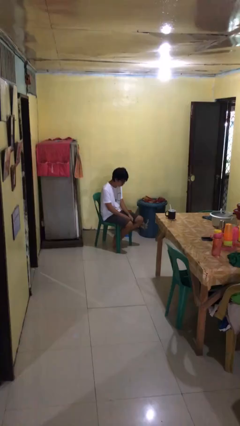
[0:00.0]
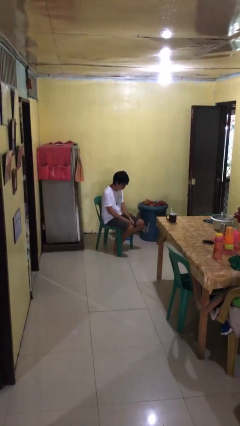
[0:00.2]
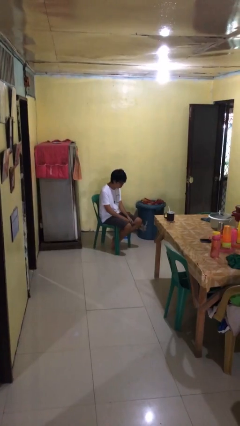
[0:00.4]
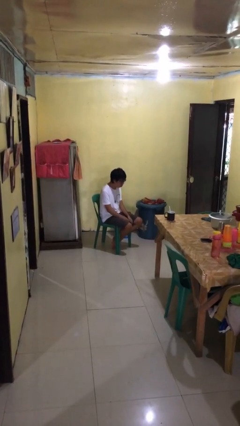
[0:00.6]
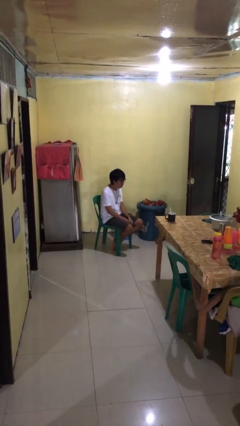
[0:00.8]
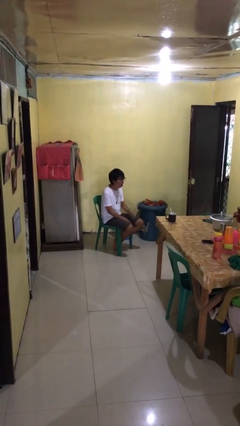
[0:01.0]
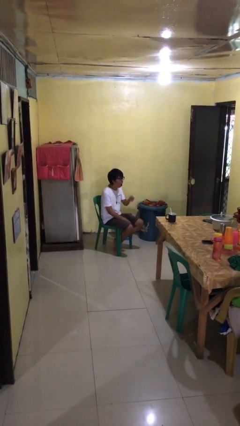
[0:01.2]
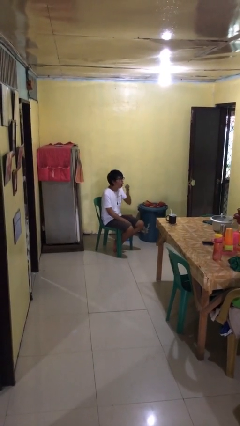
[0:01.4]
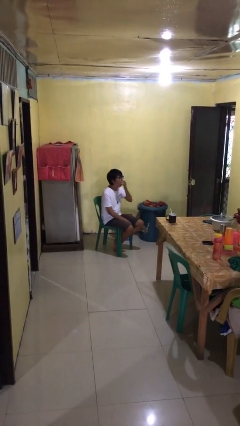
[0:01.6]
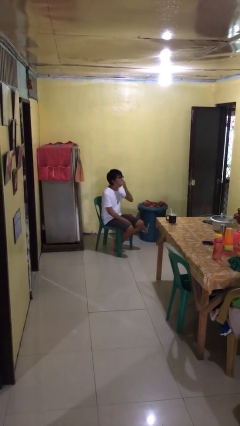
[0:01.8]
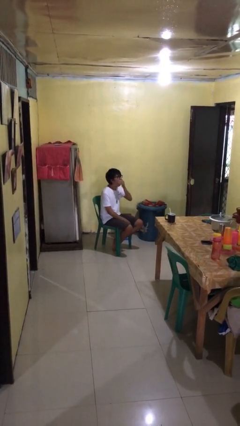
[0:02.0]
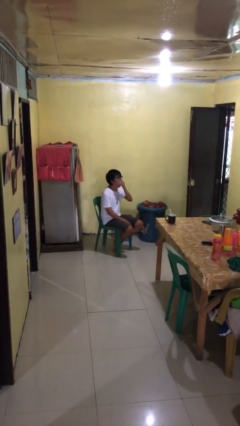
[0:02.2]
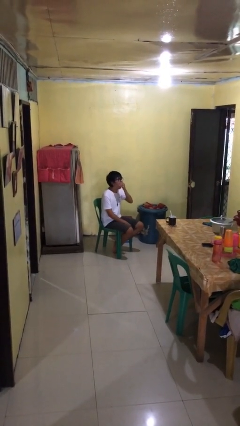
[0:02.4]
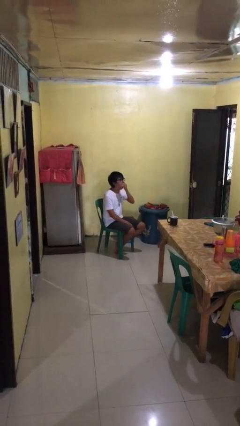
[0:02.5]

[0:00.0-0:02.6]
person yawns

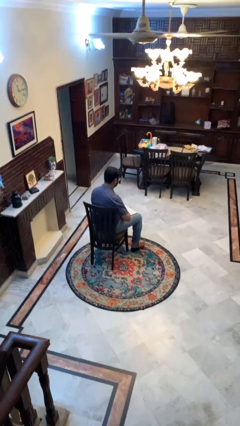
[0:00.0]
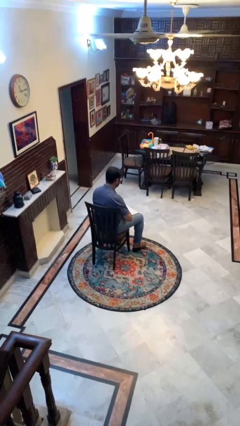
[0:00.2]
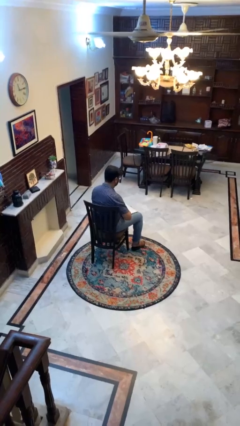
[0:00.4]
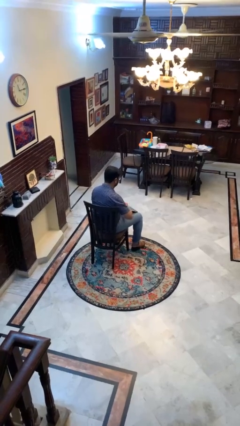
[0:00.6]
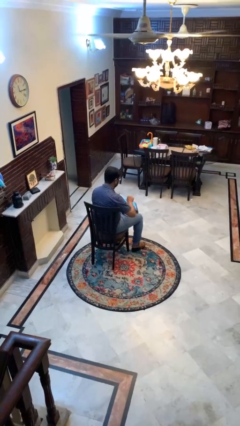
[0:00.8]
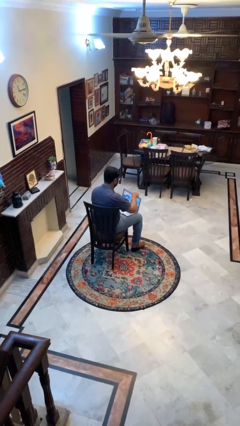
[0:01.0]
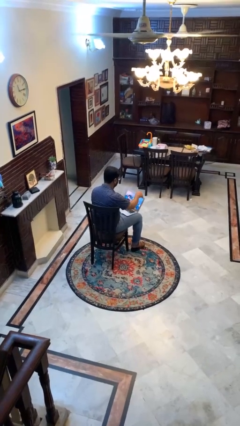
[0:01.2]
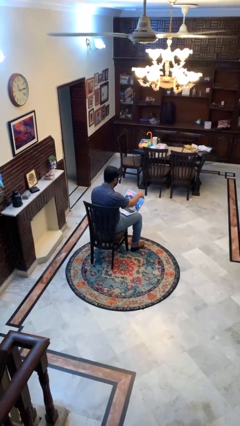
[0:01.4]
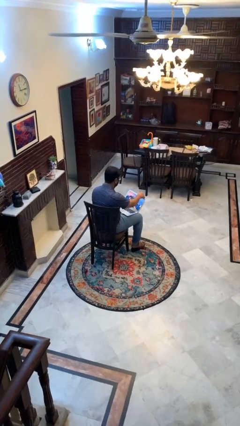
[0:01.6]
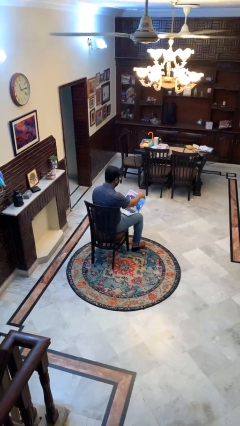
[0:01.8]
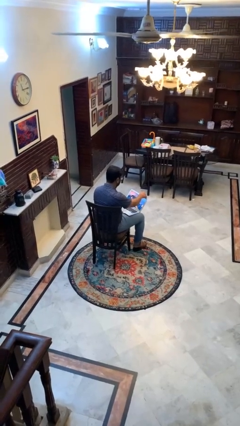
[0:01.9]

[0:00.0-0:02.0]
person opens laptop

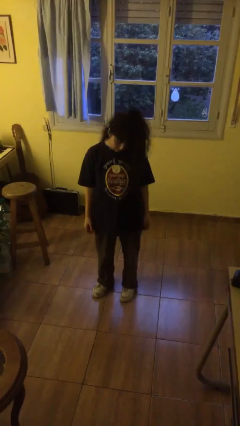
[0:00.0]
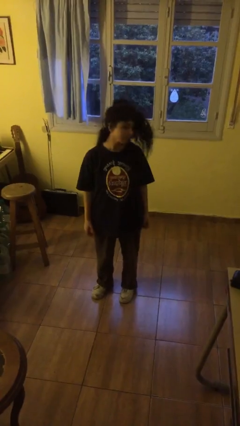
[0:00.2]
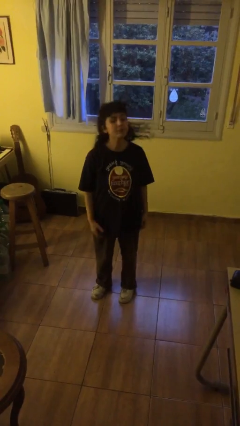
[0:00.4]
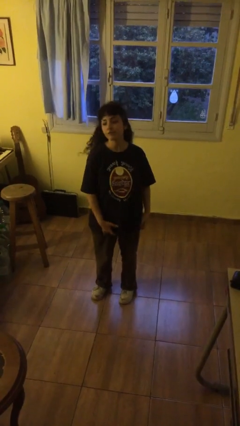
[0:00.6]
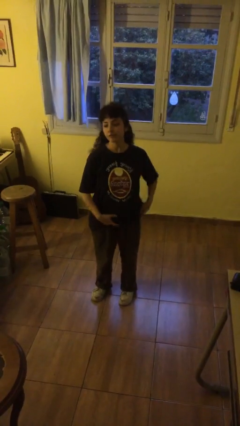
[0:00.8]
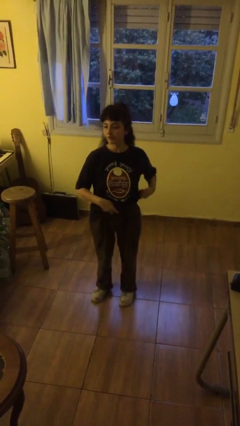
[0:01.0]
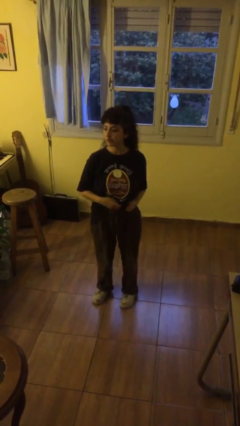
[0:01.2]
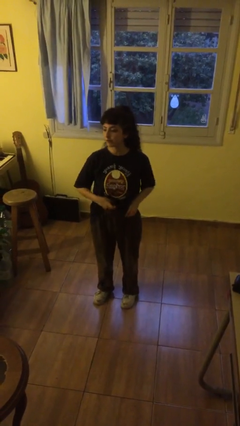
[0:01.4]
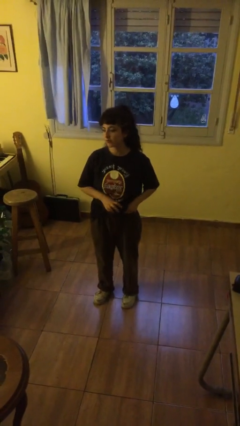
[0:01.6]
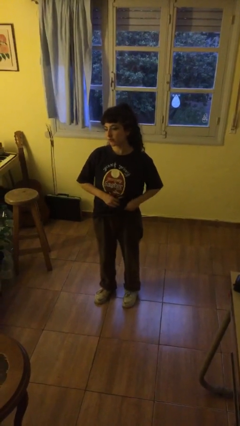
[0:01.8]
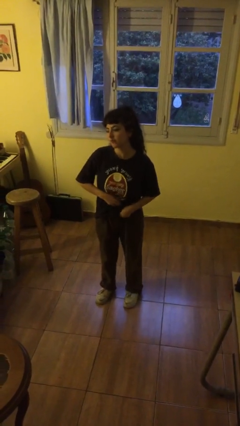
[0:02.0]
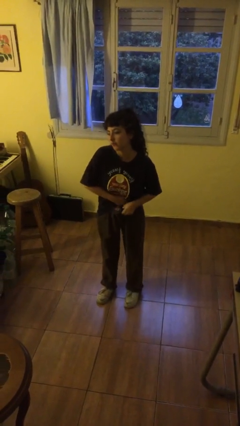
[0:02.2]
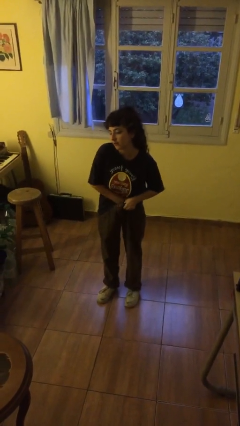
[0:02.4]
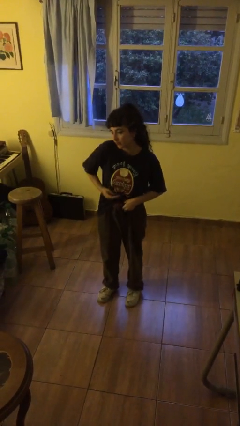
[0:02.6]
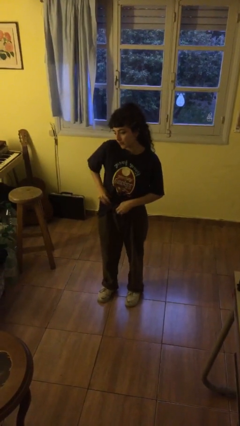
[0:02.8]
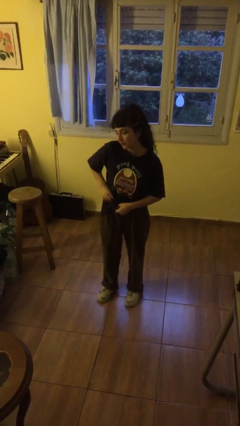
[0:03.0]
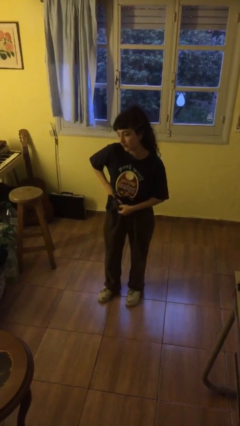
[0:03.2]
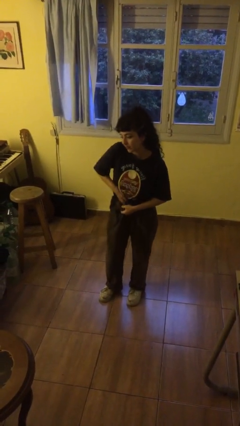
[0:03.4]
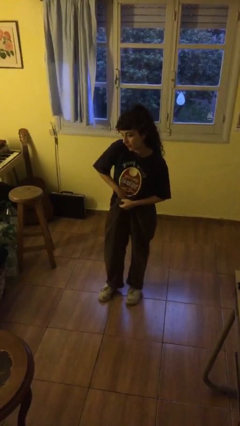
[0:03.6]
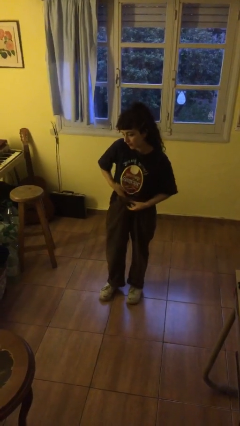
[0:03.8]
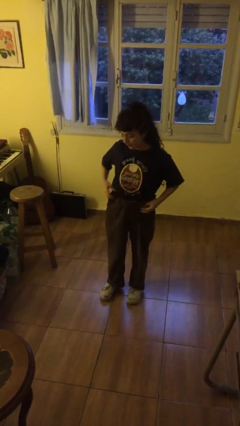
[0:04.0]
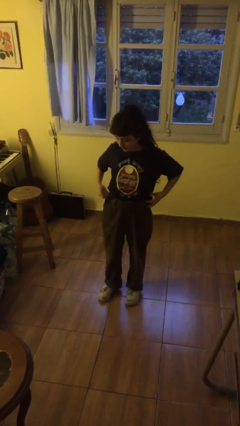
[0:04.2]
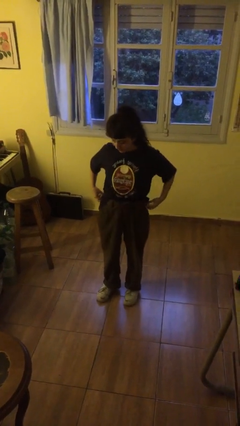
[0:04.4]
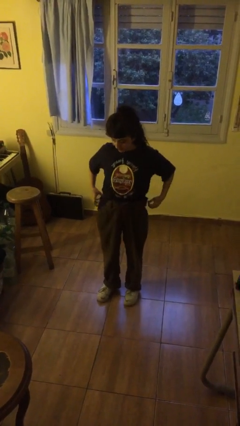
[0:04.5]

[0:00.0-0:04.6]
person tucks in shirt

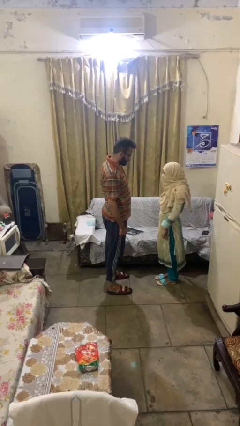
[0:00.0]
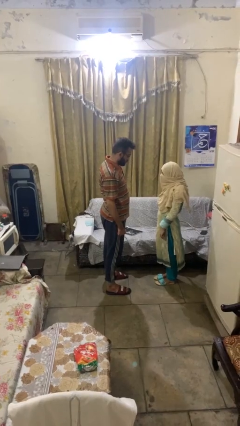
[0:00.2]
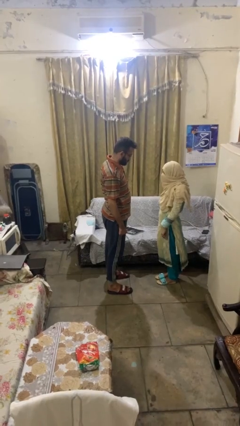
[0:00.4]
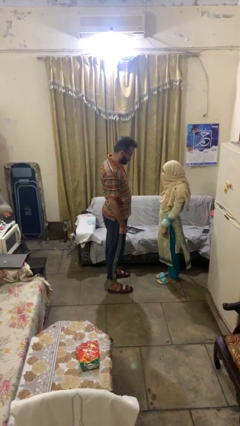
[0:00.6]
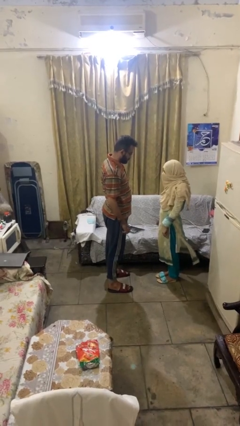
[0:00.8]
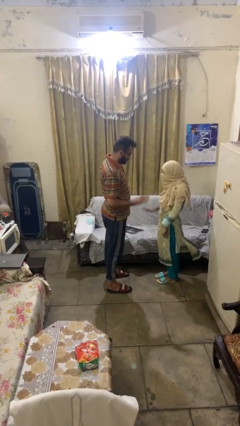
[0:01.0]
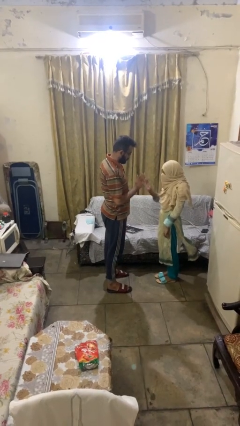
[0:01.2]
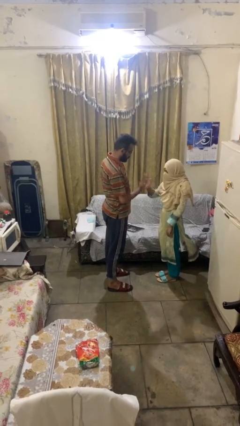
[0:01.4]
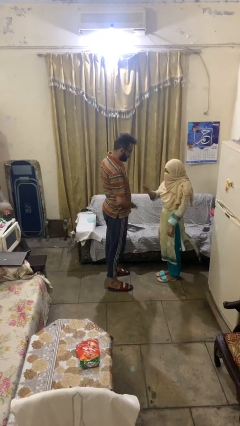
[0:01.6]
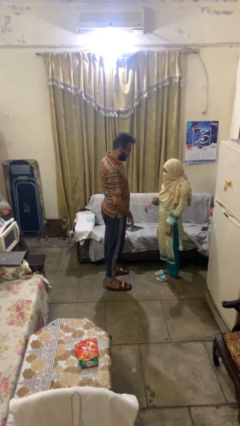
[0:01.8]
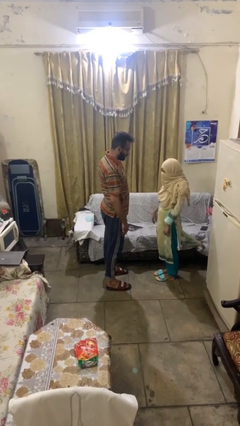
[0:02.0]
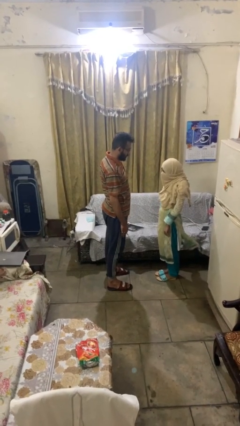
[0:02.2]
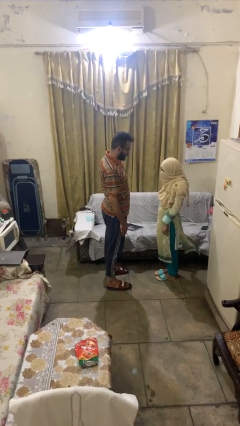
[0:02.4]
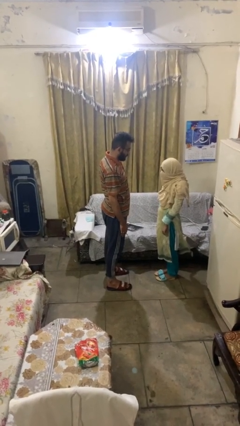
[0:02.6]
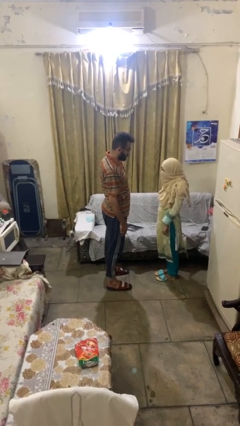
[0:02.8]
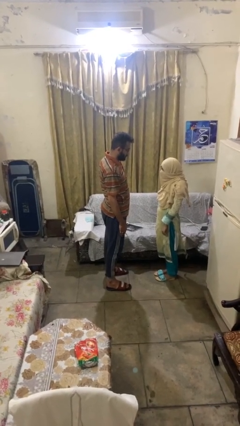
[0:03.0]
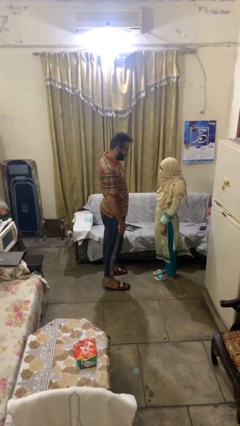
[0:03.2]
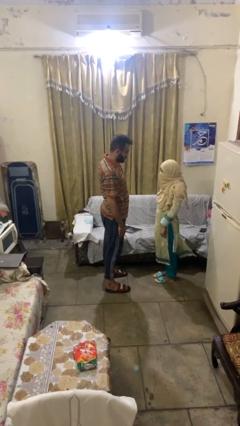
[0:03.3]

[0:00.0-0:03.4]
person highfives hand

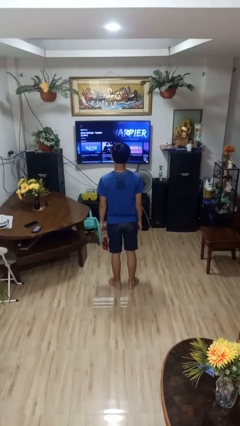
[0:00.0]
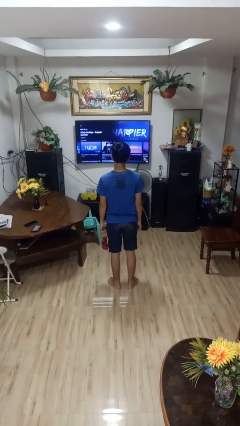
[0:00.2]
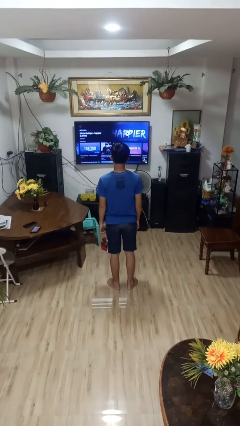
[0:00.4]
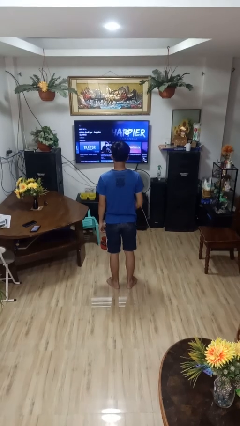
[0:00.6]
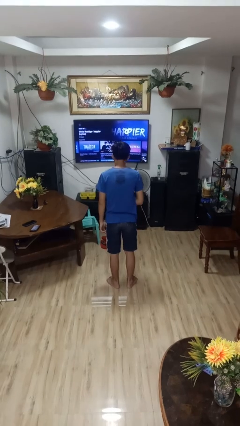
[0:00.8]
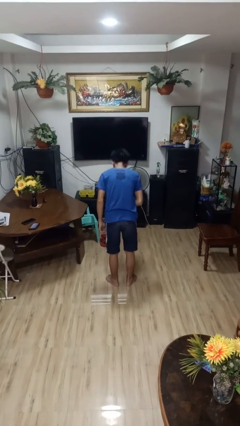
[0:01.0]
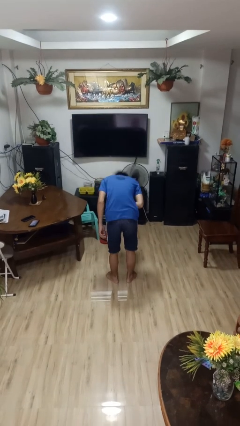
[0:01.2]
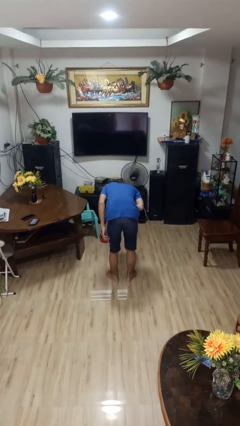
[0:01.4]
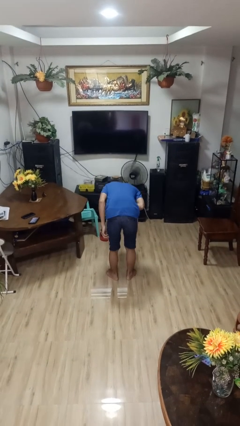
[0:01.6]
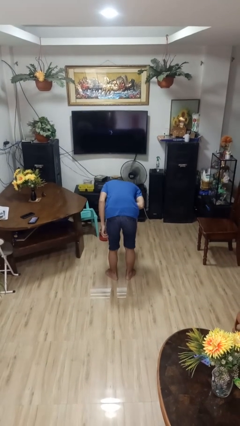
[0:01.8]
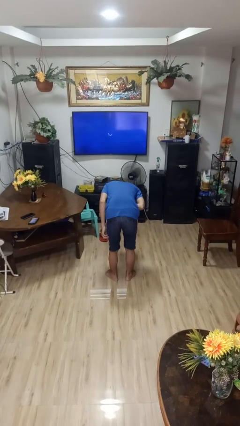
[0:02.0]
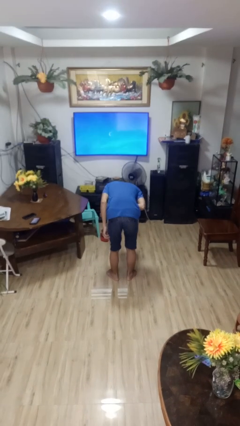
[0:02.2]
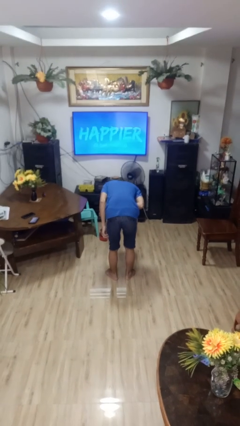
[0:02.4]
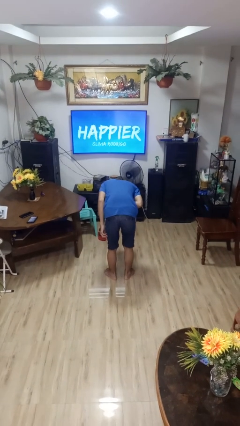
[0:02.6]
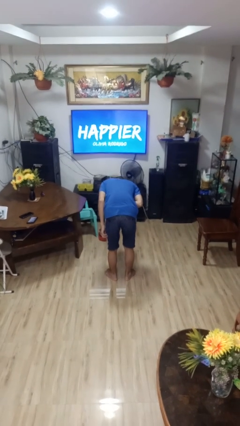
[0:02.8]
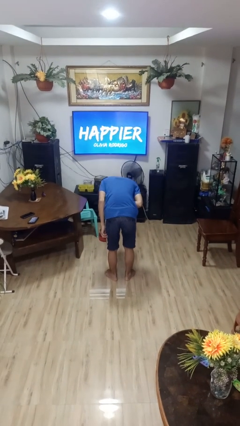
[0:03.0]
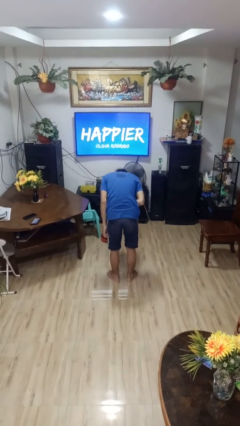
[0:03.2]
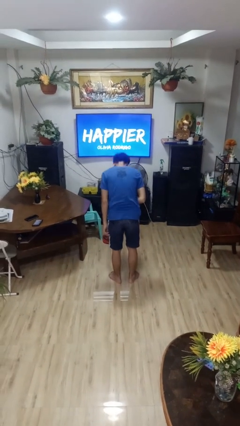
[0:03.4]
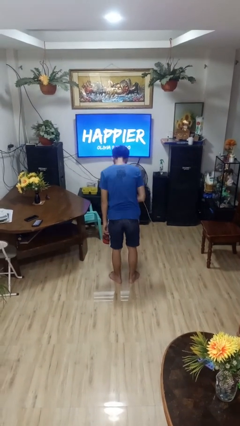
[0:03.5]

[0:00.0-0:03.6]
person bows

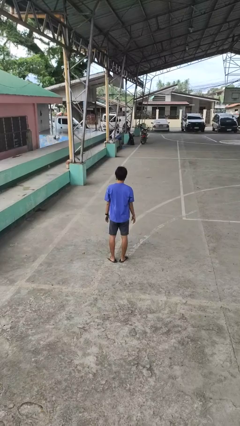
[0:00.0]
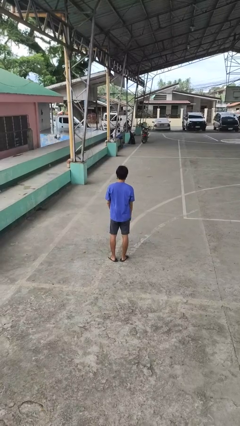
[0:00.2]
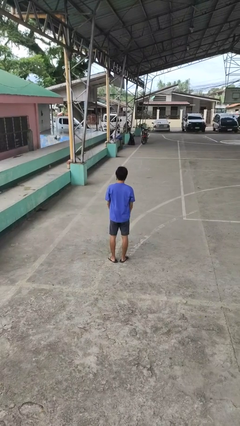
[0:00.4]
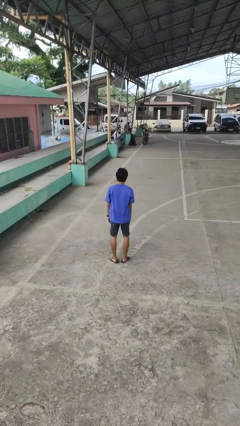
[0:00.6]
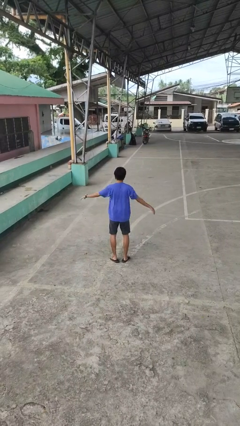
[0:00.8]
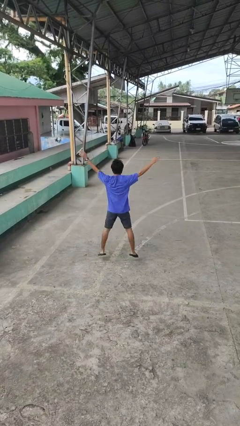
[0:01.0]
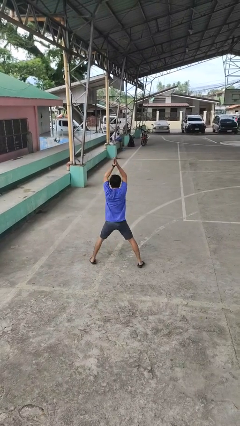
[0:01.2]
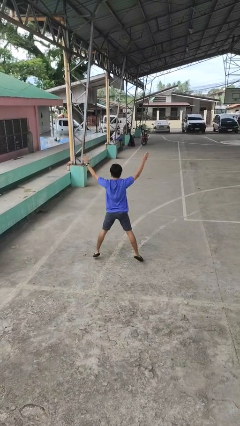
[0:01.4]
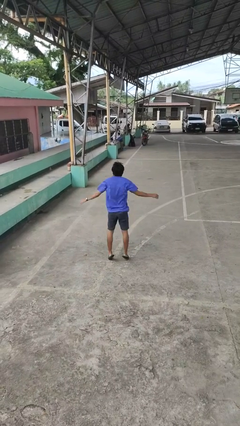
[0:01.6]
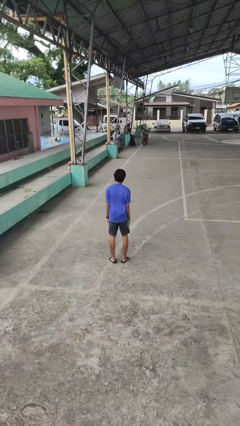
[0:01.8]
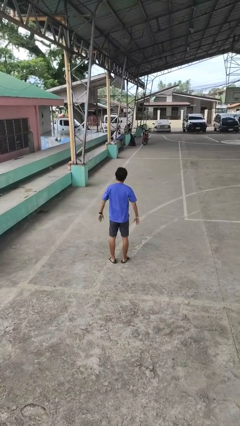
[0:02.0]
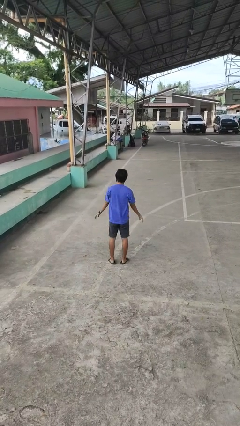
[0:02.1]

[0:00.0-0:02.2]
person exercises with jumping jacks
